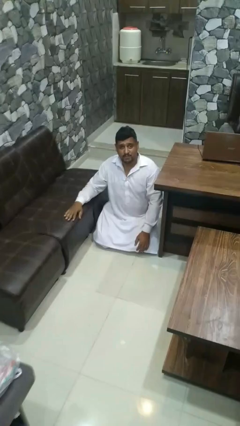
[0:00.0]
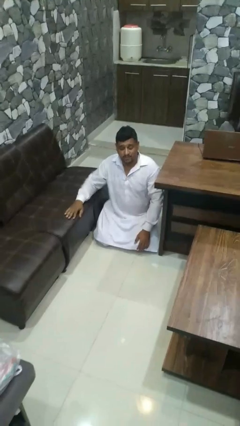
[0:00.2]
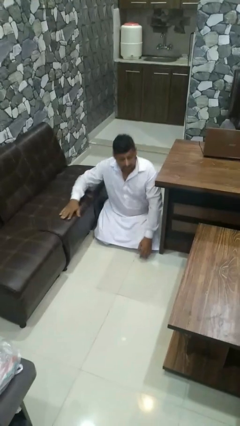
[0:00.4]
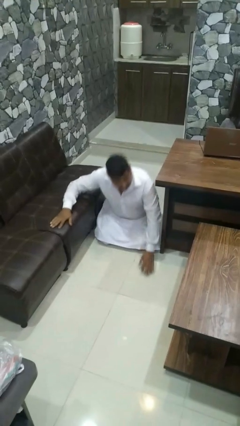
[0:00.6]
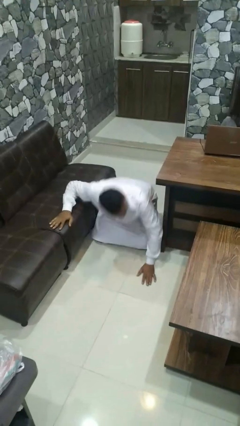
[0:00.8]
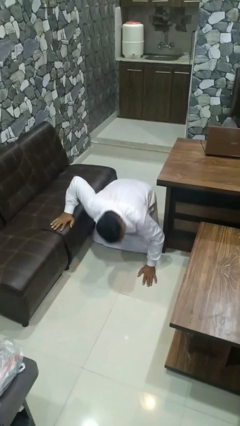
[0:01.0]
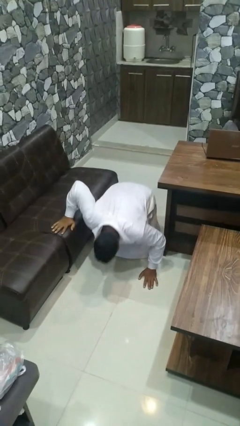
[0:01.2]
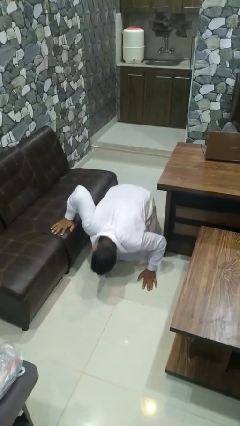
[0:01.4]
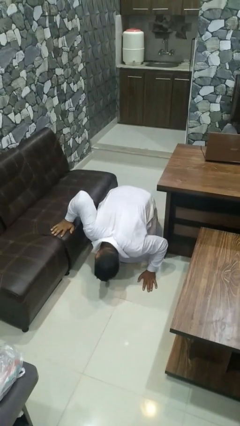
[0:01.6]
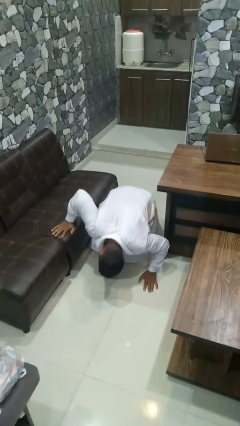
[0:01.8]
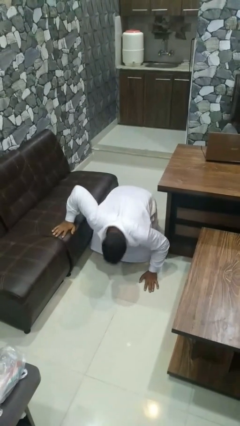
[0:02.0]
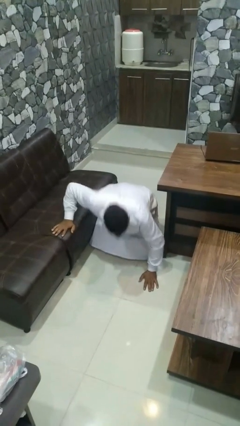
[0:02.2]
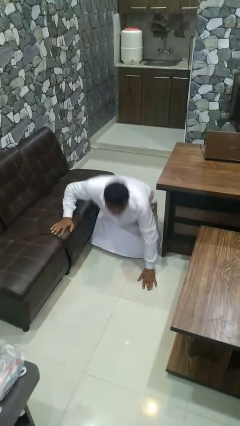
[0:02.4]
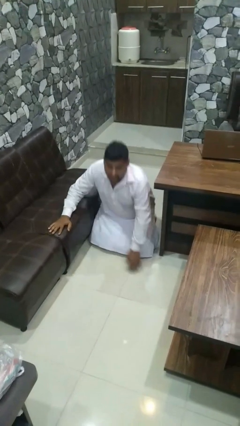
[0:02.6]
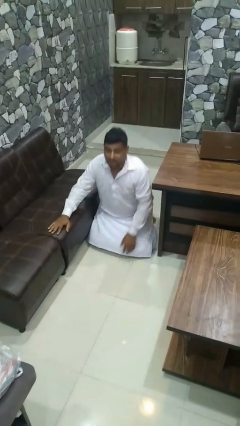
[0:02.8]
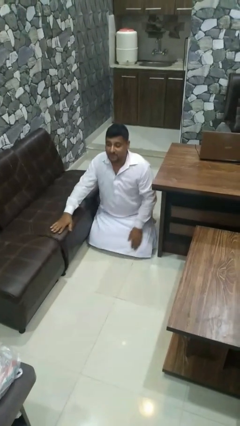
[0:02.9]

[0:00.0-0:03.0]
person searches under couch

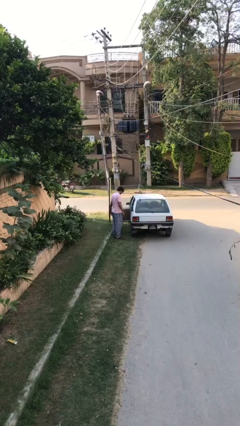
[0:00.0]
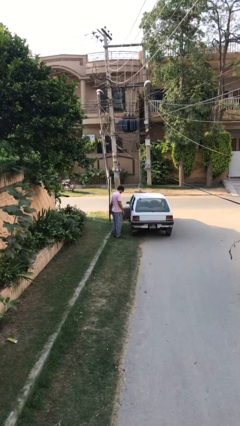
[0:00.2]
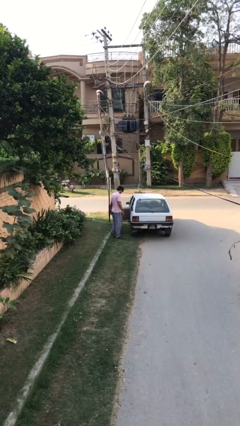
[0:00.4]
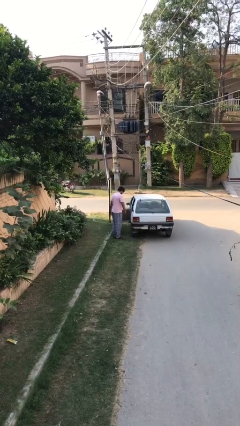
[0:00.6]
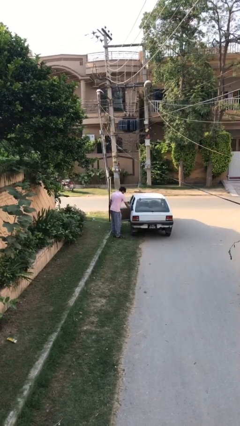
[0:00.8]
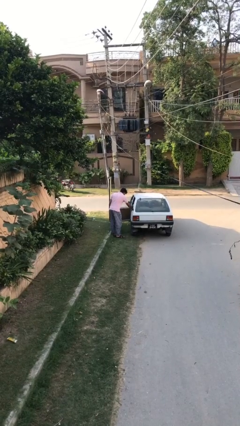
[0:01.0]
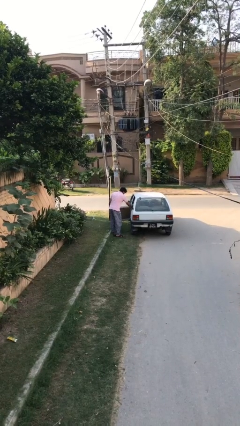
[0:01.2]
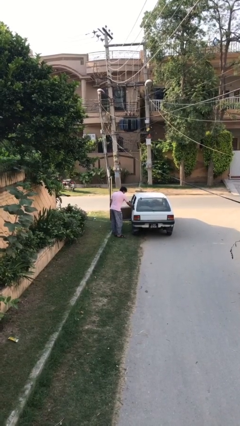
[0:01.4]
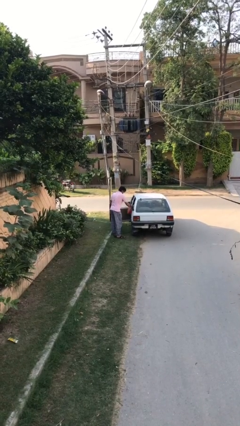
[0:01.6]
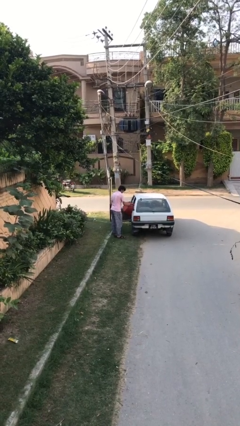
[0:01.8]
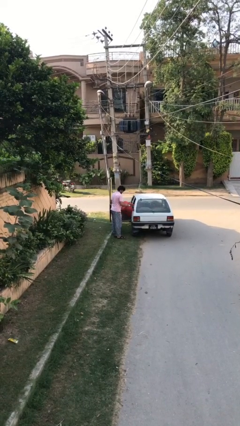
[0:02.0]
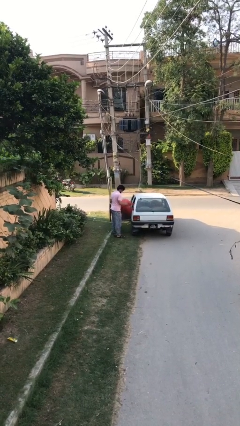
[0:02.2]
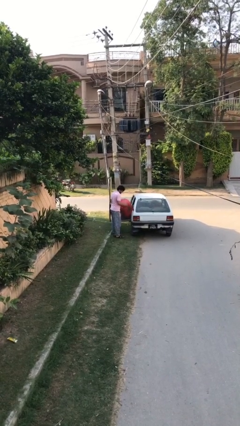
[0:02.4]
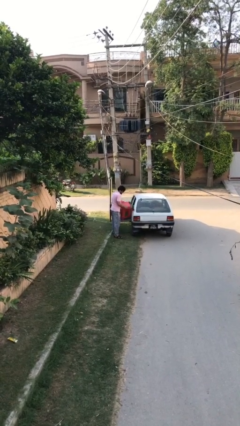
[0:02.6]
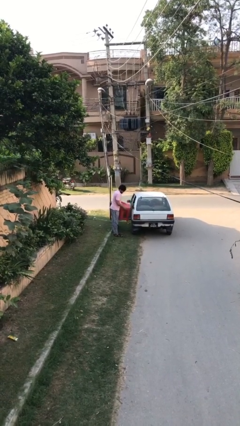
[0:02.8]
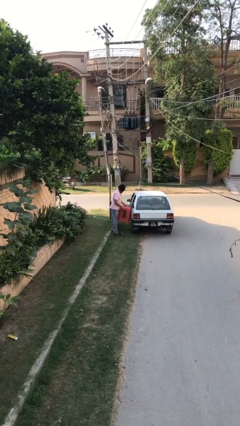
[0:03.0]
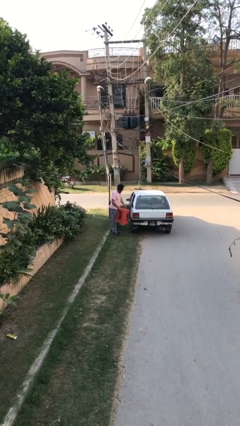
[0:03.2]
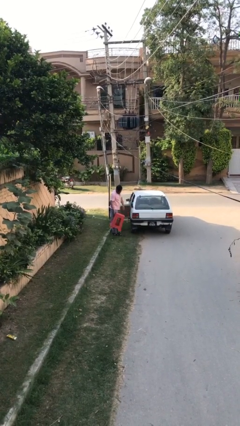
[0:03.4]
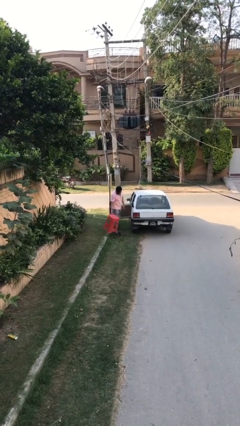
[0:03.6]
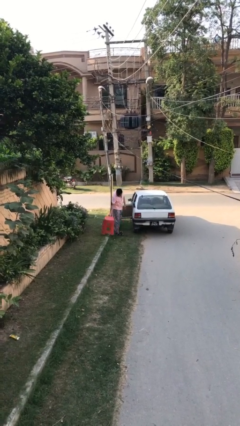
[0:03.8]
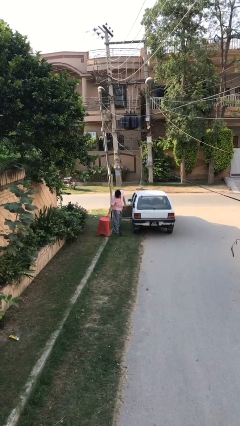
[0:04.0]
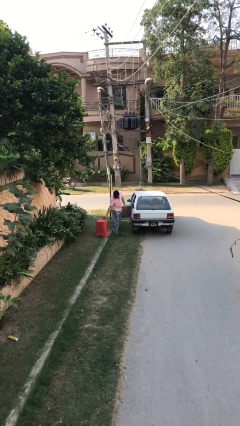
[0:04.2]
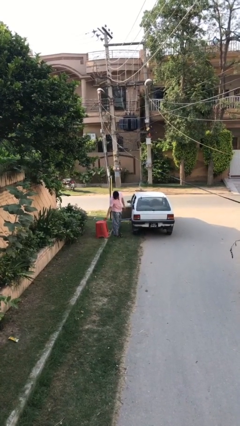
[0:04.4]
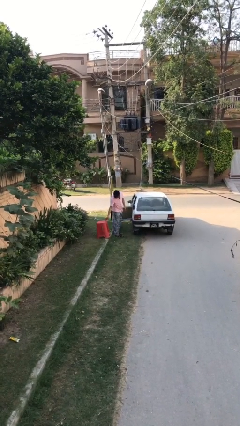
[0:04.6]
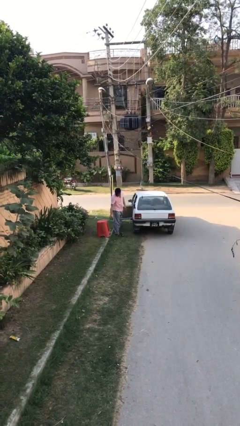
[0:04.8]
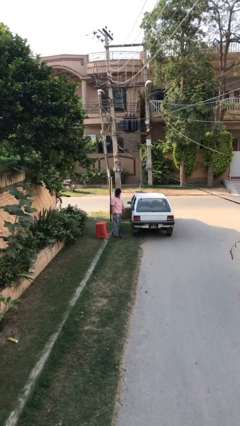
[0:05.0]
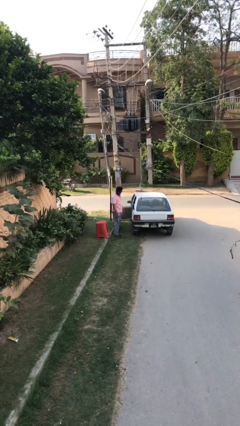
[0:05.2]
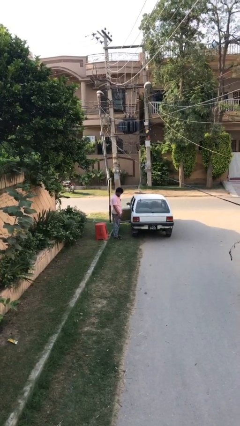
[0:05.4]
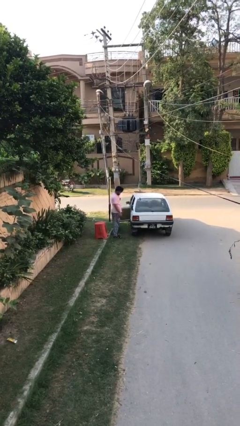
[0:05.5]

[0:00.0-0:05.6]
person unloads car

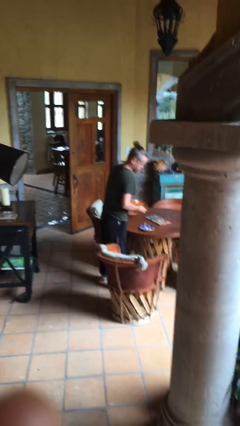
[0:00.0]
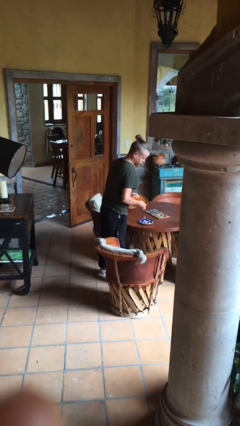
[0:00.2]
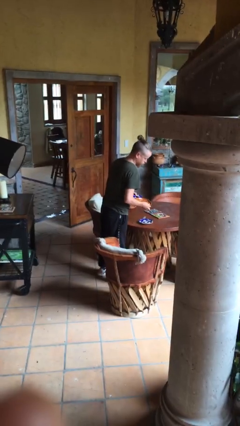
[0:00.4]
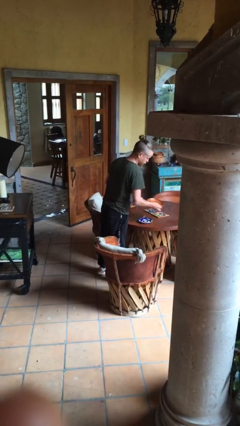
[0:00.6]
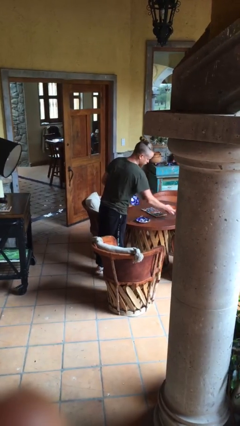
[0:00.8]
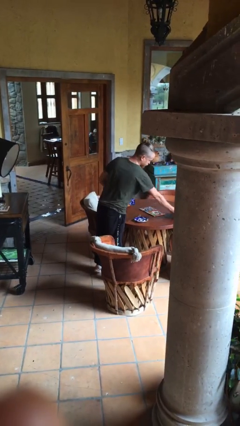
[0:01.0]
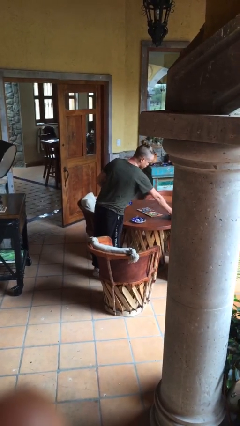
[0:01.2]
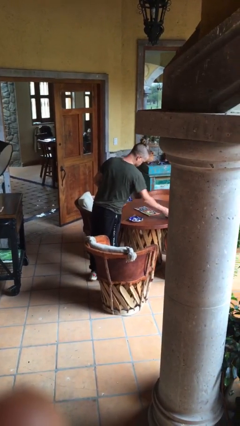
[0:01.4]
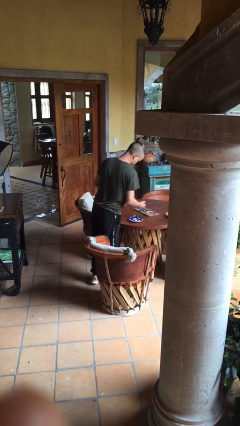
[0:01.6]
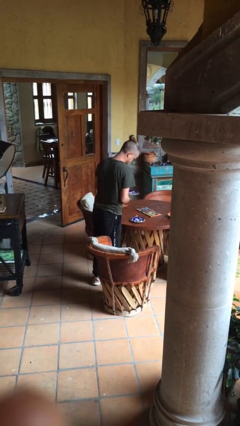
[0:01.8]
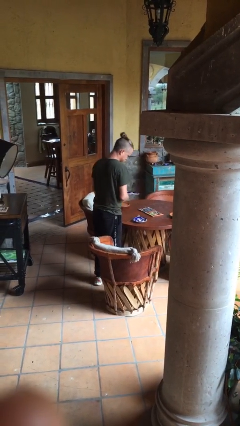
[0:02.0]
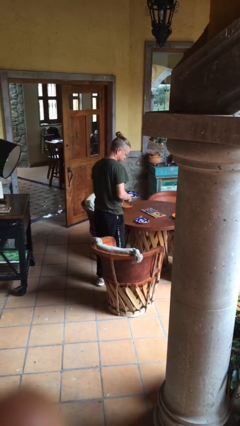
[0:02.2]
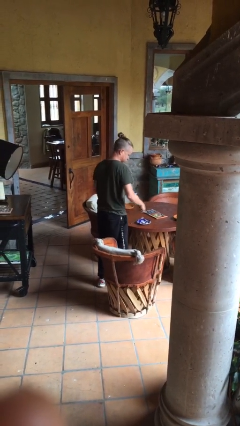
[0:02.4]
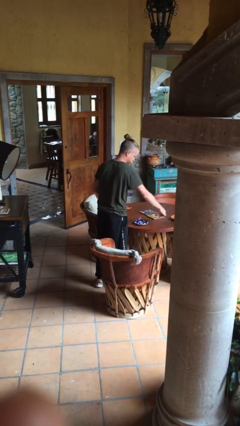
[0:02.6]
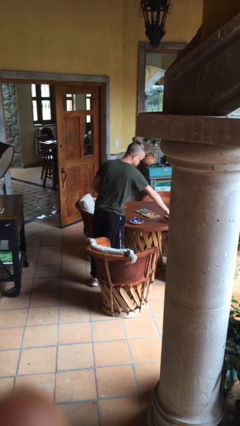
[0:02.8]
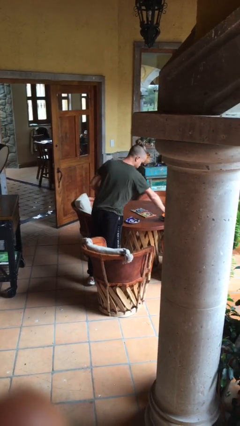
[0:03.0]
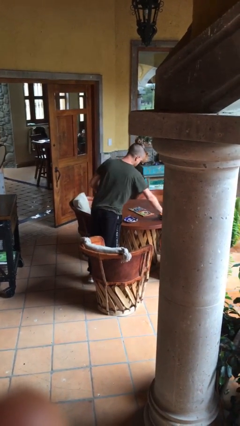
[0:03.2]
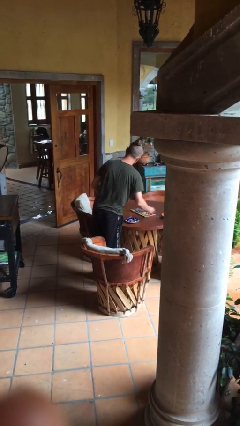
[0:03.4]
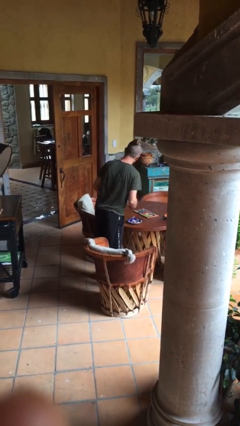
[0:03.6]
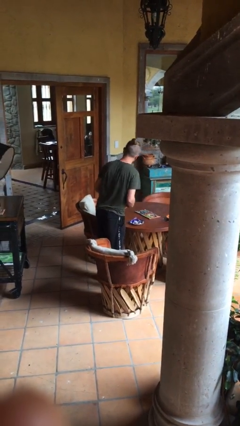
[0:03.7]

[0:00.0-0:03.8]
person sets table

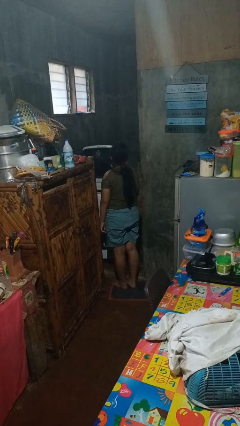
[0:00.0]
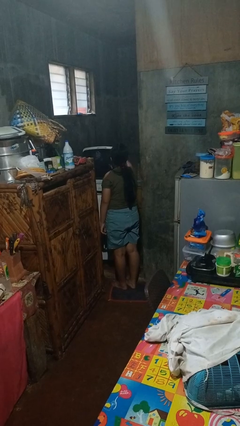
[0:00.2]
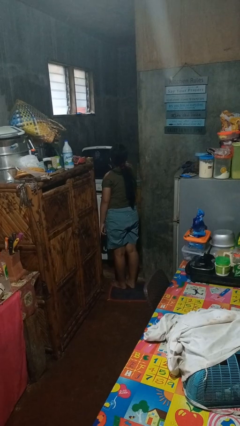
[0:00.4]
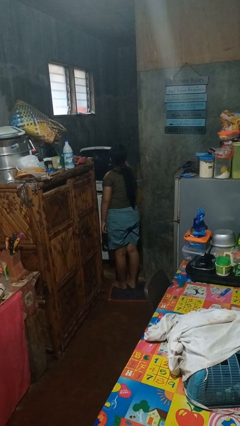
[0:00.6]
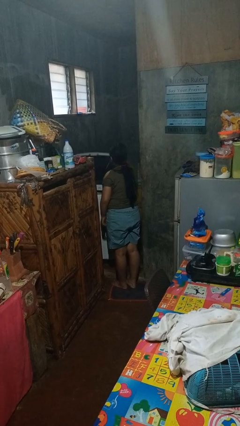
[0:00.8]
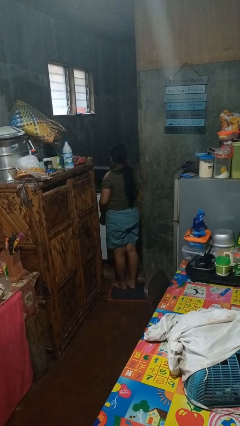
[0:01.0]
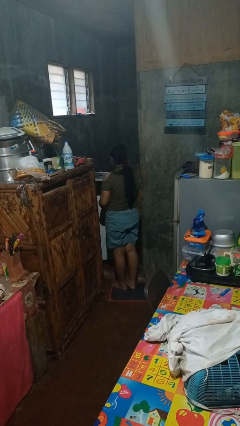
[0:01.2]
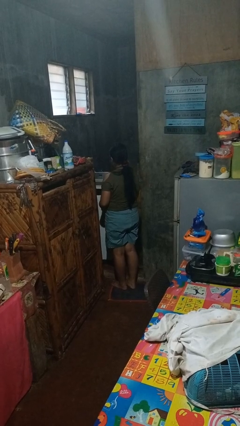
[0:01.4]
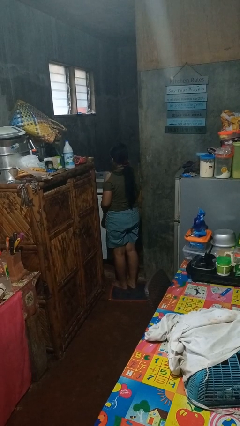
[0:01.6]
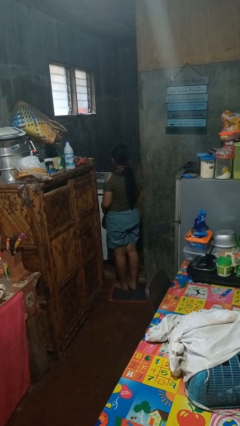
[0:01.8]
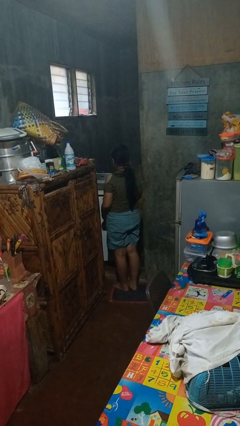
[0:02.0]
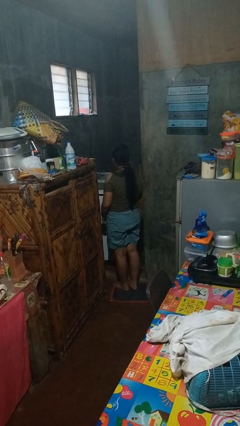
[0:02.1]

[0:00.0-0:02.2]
person closes clothes washer

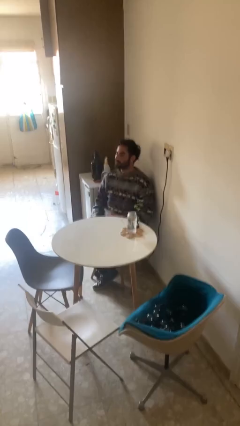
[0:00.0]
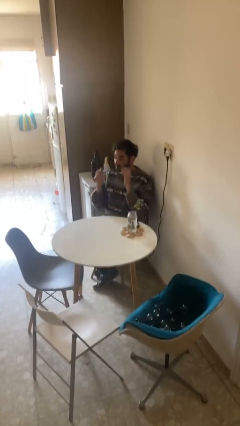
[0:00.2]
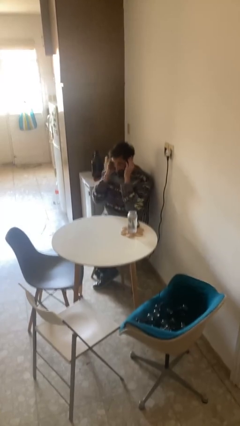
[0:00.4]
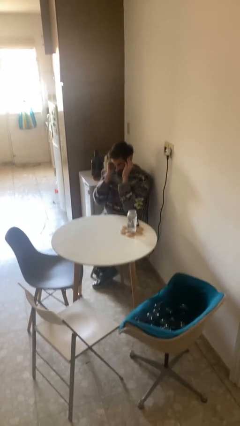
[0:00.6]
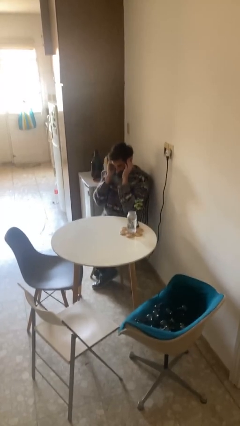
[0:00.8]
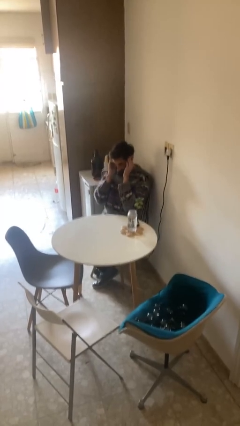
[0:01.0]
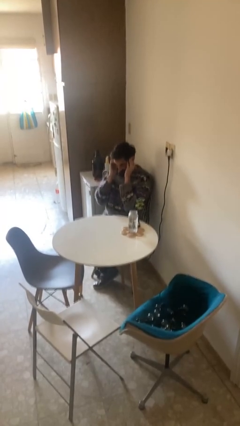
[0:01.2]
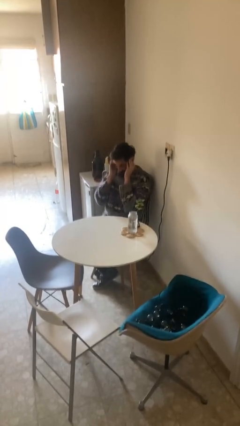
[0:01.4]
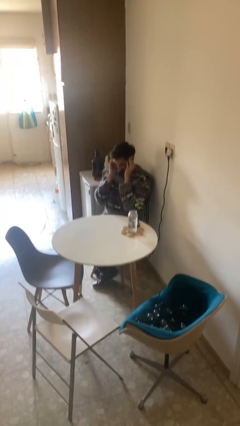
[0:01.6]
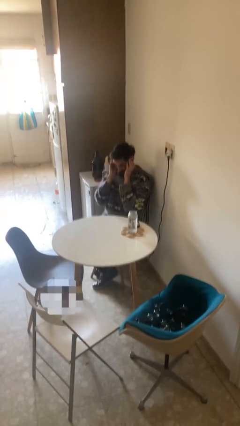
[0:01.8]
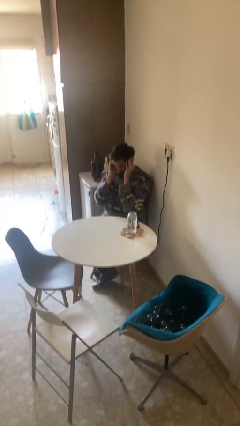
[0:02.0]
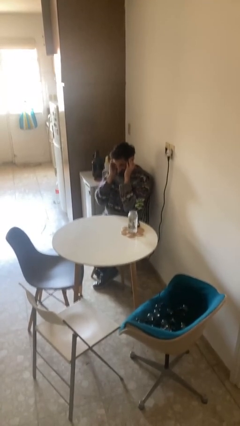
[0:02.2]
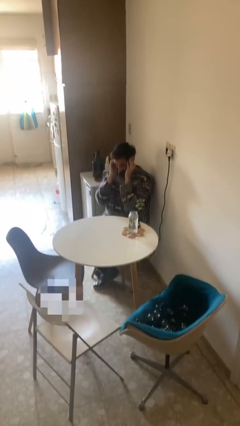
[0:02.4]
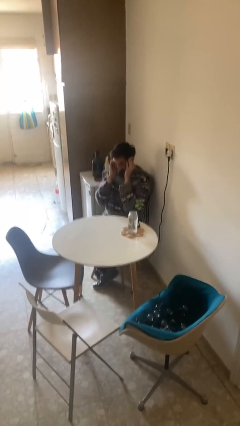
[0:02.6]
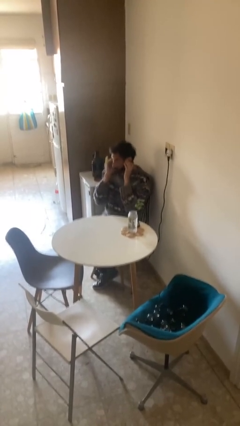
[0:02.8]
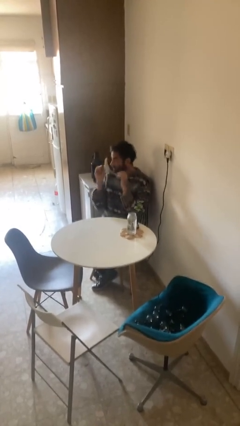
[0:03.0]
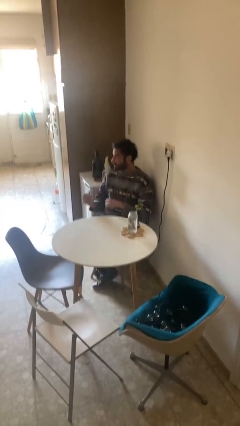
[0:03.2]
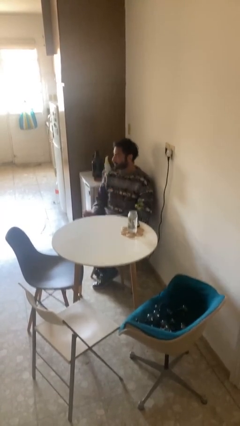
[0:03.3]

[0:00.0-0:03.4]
person puts fingers in ear
